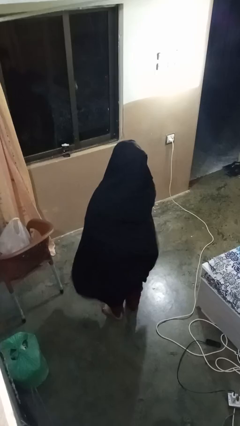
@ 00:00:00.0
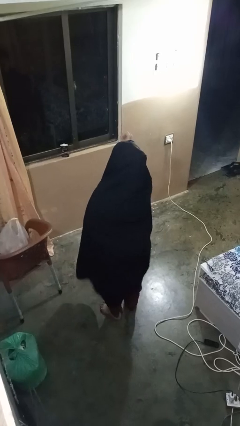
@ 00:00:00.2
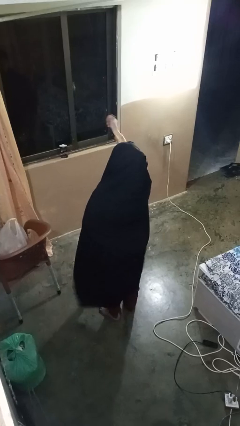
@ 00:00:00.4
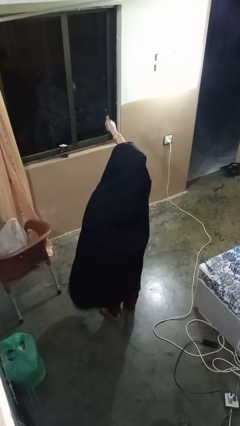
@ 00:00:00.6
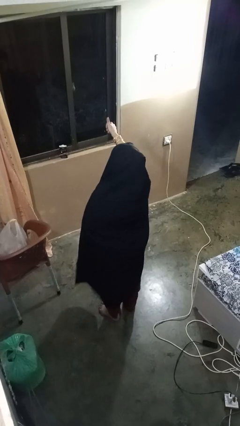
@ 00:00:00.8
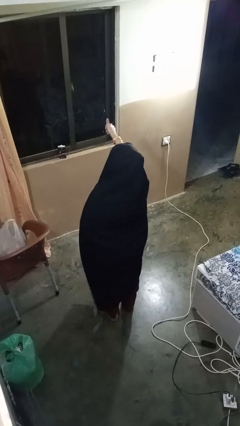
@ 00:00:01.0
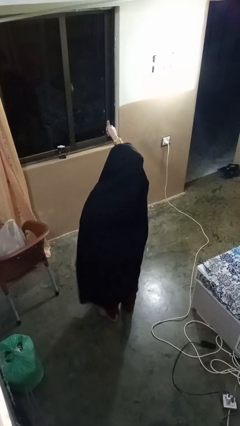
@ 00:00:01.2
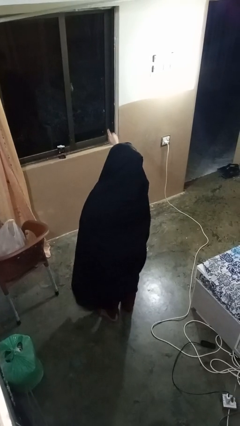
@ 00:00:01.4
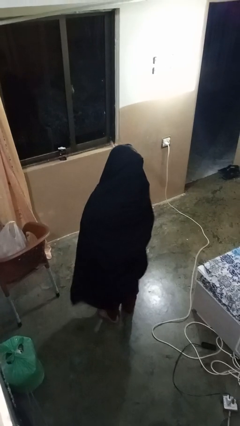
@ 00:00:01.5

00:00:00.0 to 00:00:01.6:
person gestures thumbs up

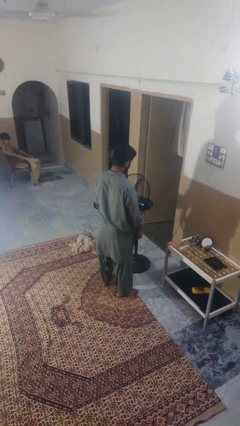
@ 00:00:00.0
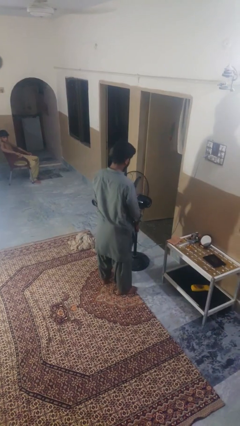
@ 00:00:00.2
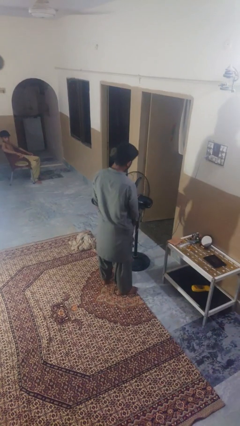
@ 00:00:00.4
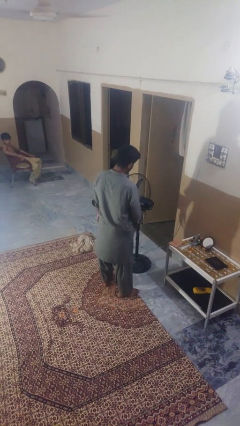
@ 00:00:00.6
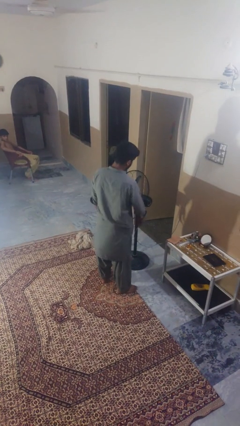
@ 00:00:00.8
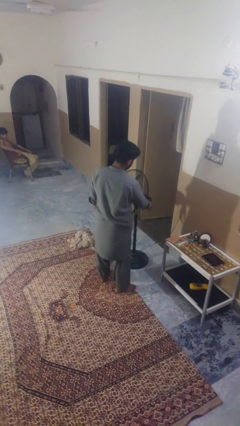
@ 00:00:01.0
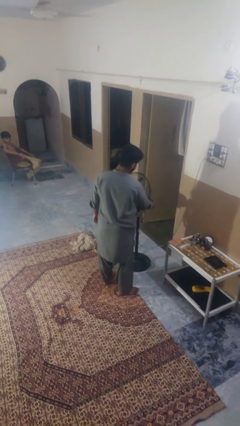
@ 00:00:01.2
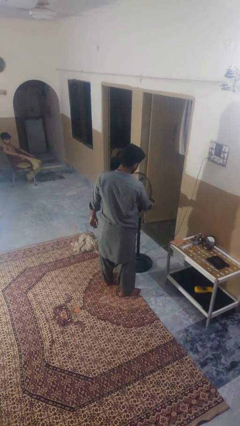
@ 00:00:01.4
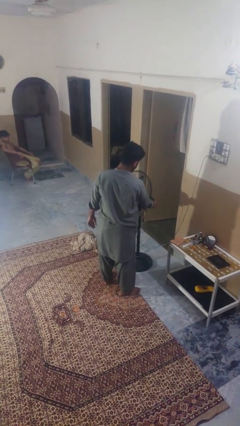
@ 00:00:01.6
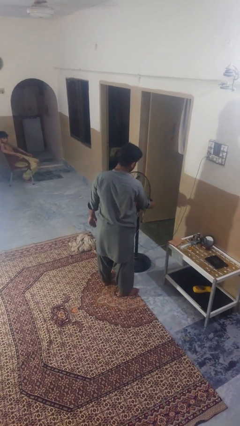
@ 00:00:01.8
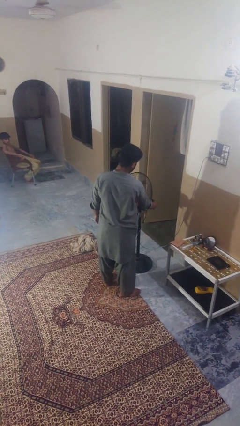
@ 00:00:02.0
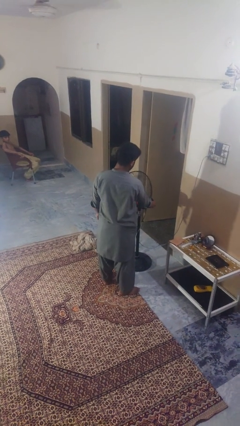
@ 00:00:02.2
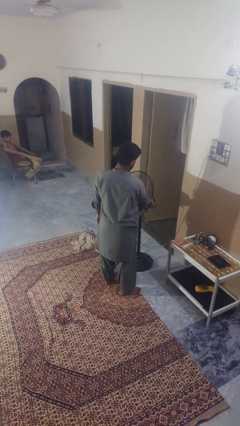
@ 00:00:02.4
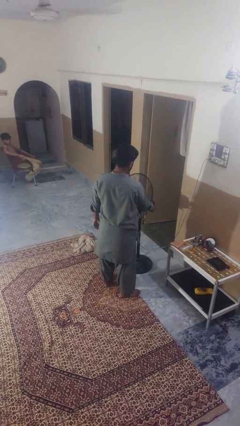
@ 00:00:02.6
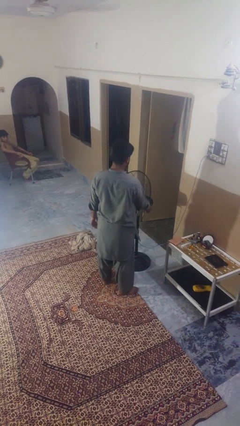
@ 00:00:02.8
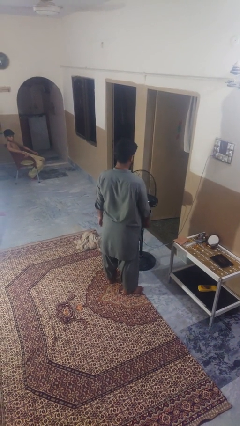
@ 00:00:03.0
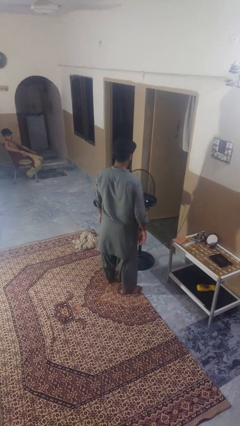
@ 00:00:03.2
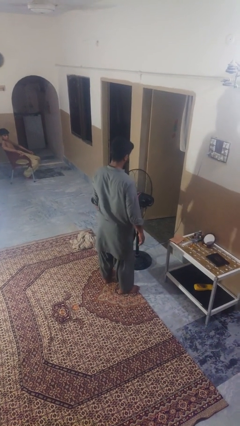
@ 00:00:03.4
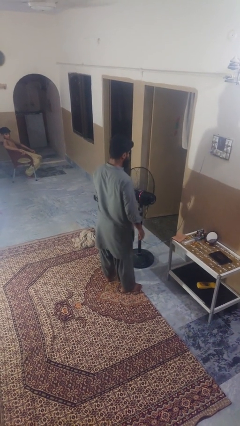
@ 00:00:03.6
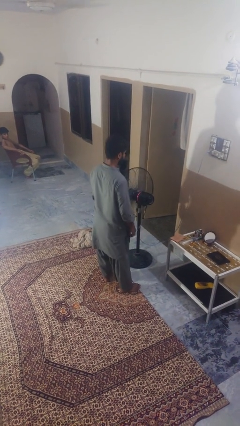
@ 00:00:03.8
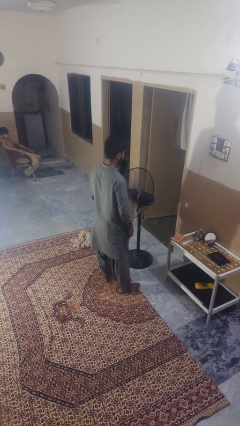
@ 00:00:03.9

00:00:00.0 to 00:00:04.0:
person turns on fan

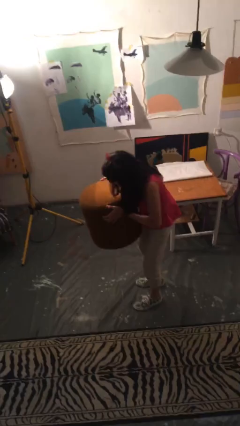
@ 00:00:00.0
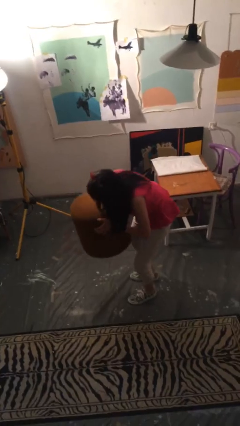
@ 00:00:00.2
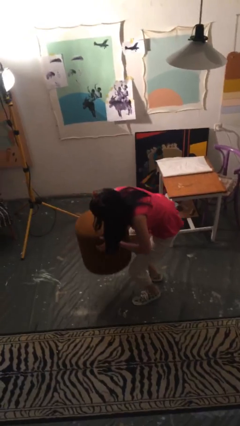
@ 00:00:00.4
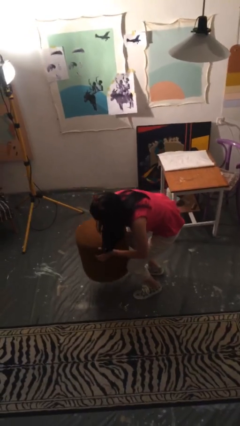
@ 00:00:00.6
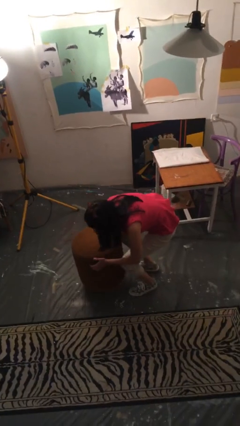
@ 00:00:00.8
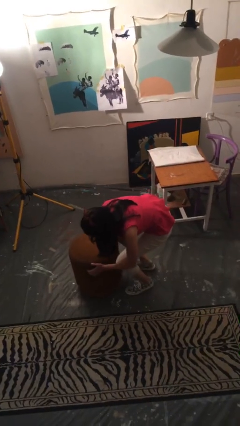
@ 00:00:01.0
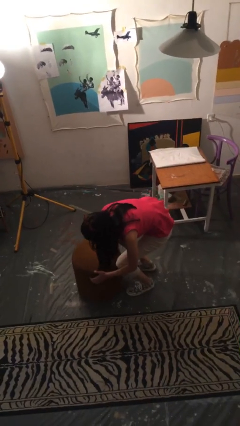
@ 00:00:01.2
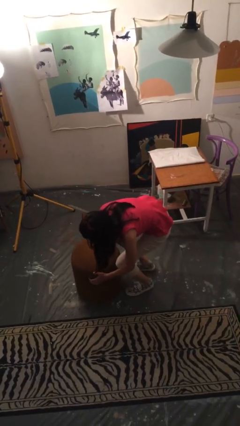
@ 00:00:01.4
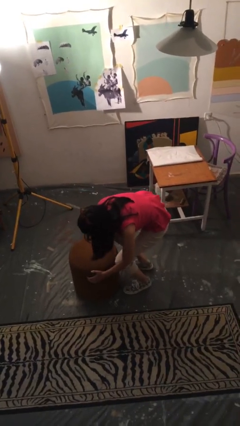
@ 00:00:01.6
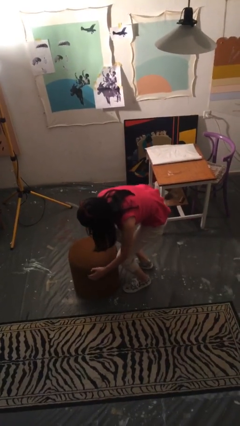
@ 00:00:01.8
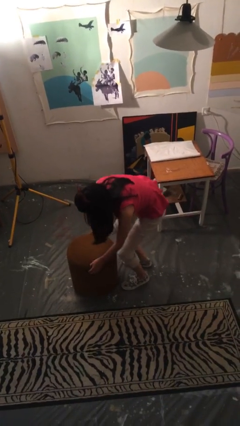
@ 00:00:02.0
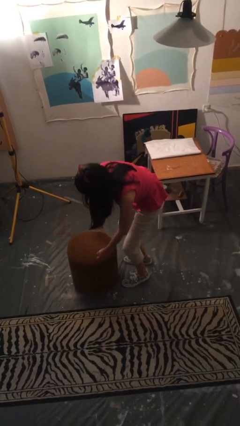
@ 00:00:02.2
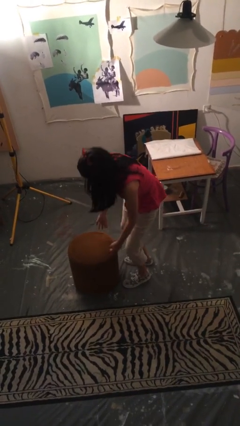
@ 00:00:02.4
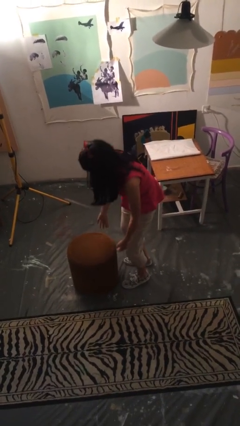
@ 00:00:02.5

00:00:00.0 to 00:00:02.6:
person puts down object on floor

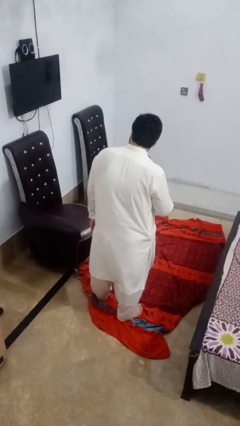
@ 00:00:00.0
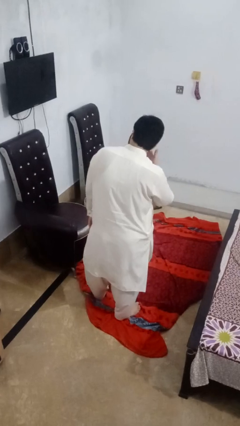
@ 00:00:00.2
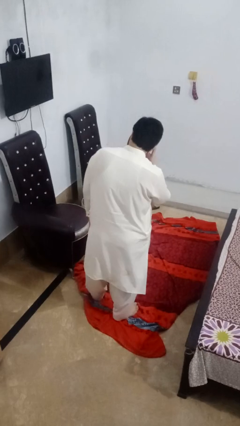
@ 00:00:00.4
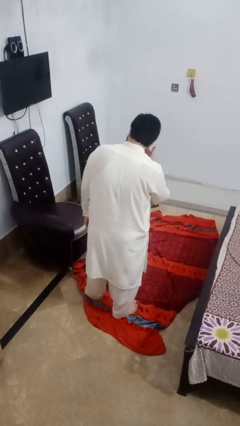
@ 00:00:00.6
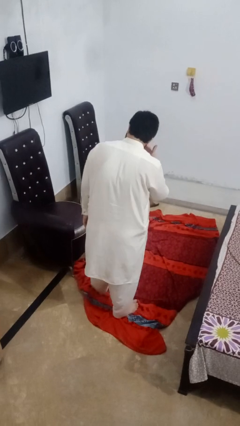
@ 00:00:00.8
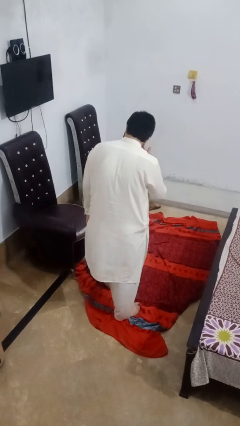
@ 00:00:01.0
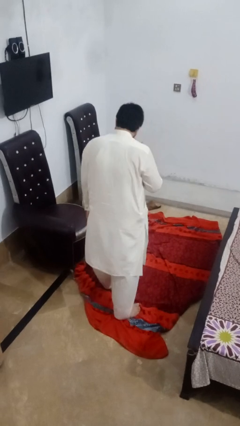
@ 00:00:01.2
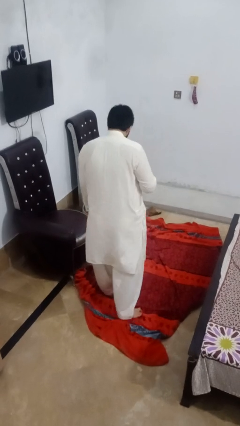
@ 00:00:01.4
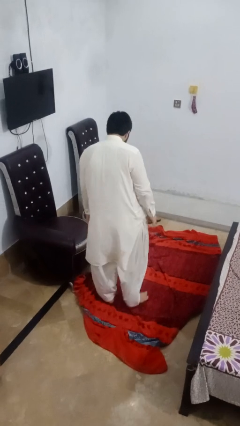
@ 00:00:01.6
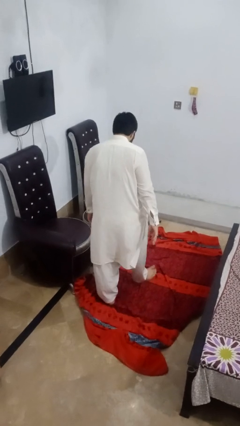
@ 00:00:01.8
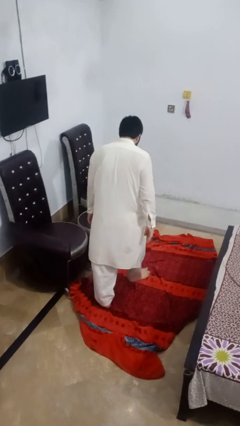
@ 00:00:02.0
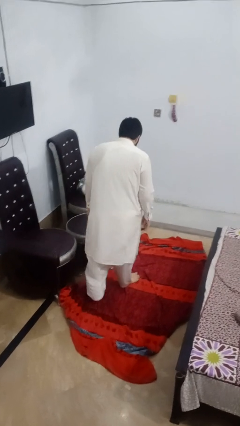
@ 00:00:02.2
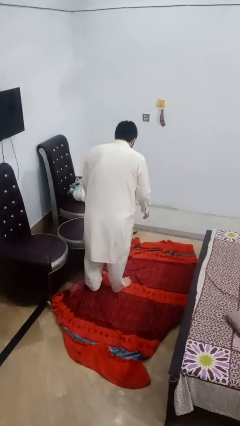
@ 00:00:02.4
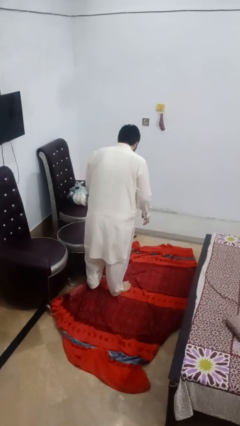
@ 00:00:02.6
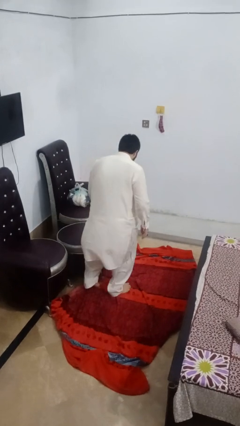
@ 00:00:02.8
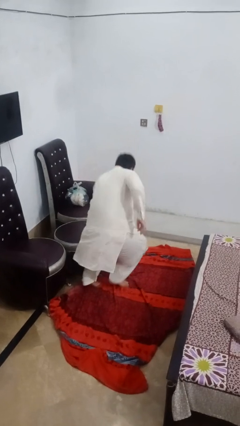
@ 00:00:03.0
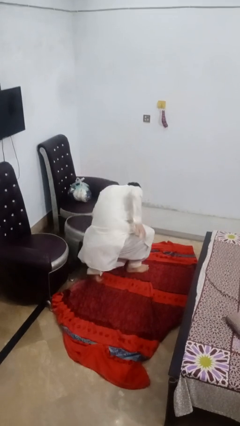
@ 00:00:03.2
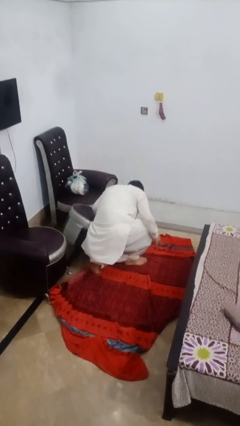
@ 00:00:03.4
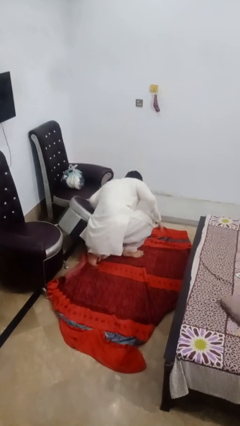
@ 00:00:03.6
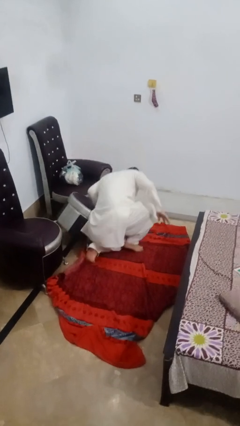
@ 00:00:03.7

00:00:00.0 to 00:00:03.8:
person trips on object on floor

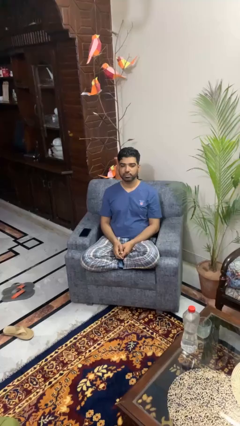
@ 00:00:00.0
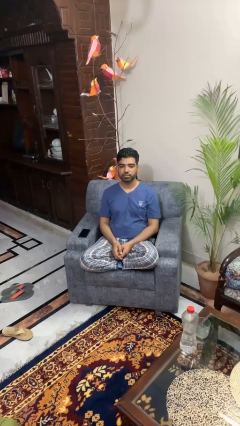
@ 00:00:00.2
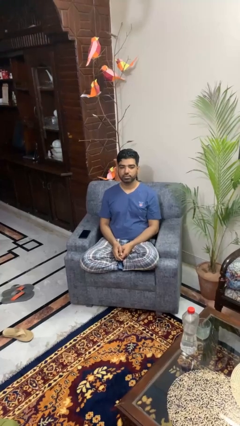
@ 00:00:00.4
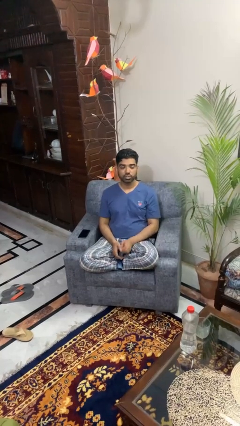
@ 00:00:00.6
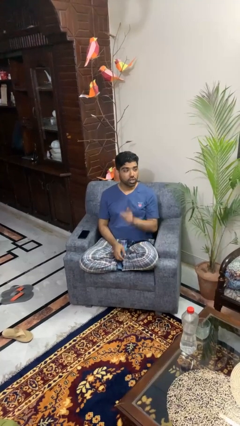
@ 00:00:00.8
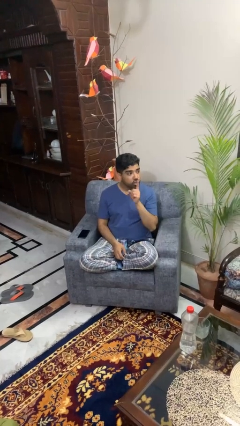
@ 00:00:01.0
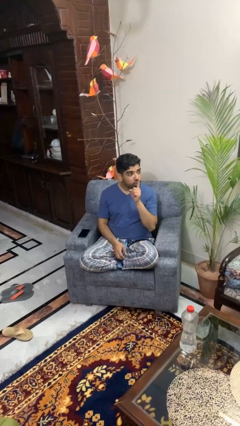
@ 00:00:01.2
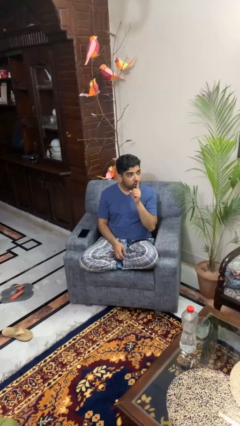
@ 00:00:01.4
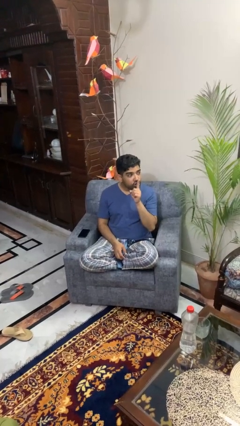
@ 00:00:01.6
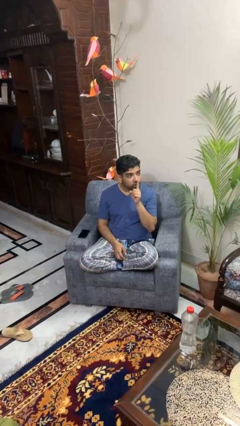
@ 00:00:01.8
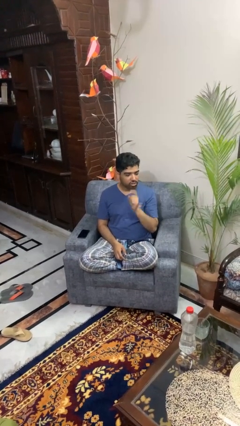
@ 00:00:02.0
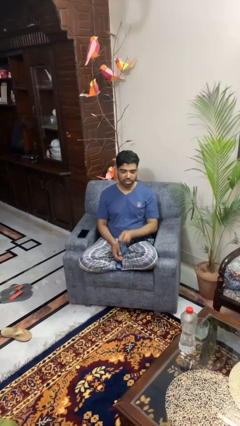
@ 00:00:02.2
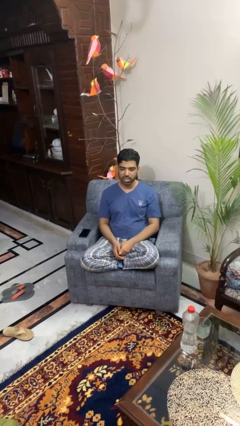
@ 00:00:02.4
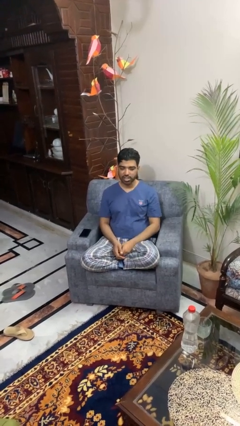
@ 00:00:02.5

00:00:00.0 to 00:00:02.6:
person gestures be quiet

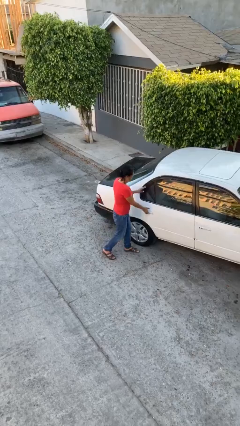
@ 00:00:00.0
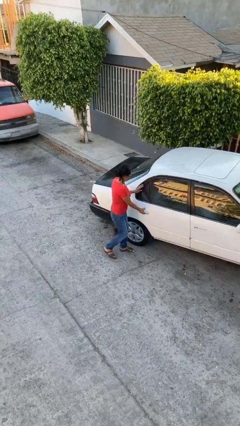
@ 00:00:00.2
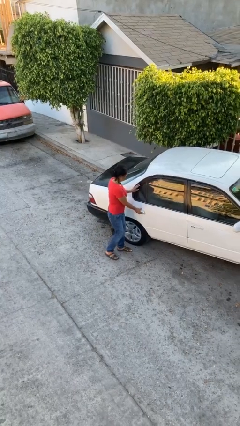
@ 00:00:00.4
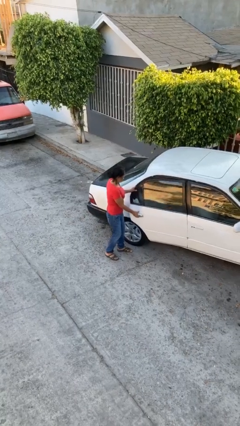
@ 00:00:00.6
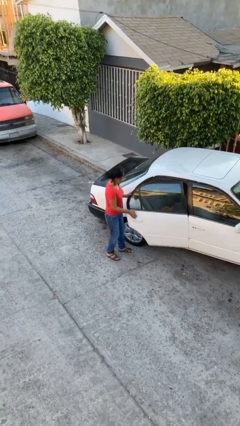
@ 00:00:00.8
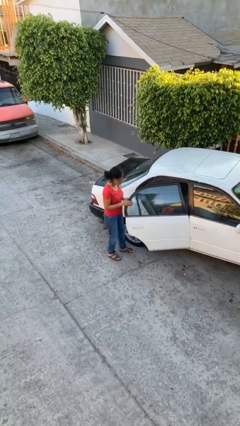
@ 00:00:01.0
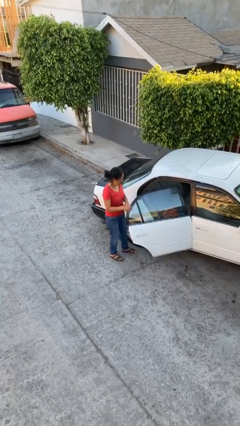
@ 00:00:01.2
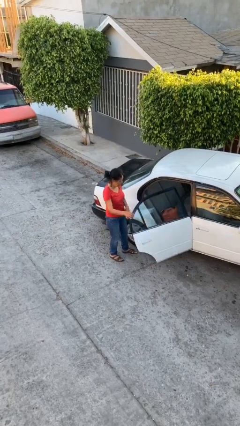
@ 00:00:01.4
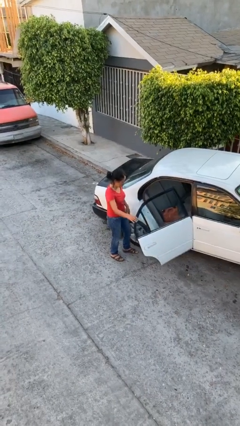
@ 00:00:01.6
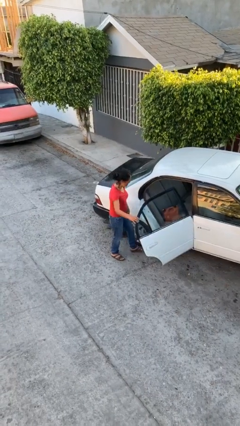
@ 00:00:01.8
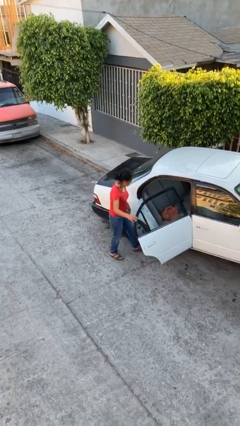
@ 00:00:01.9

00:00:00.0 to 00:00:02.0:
person opens car door

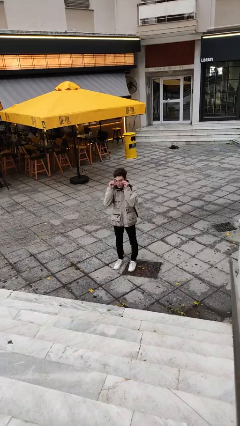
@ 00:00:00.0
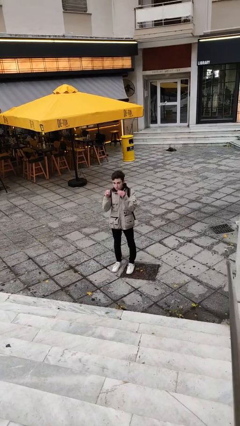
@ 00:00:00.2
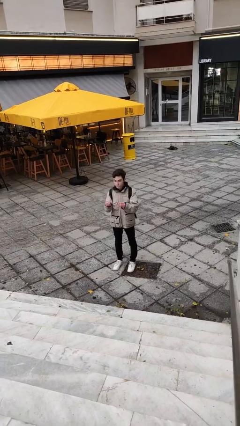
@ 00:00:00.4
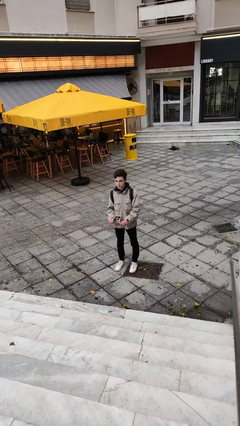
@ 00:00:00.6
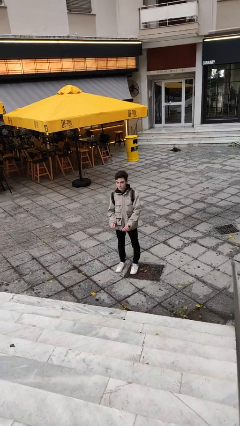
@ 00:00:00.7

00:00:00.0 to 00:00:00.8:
person takes off glasses
